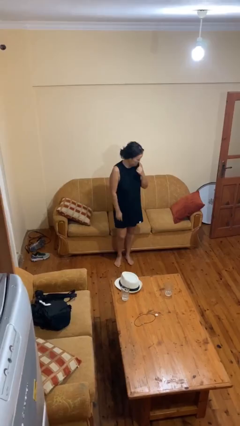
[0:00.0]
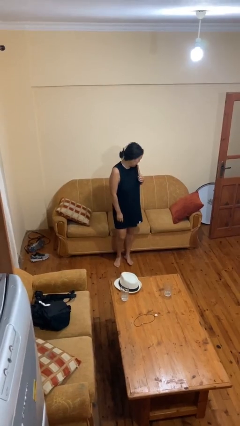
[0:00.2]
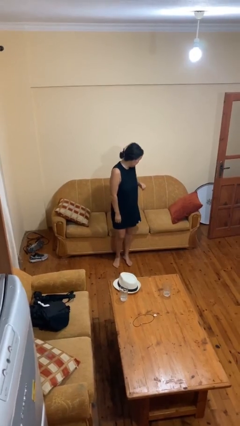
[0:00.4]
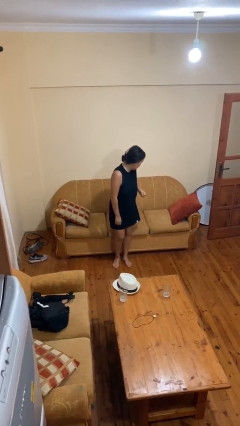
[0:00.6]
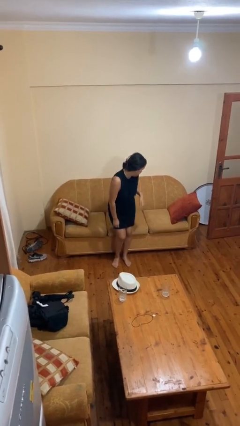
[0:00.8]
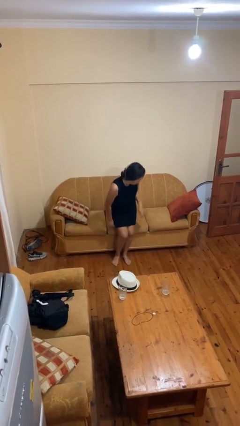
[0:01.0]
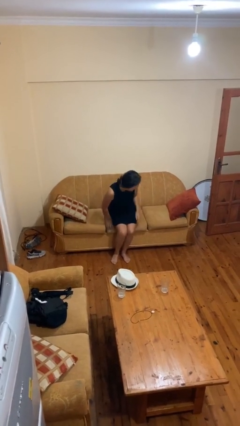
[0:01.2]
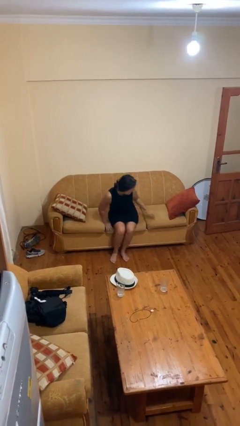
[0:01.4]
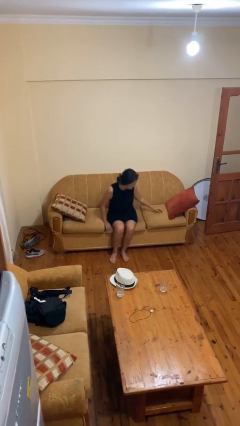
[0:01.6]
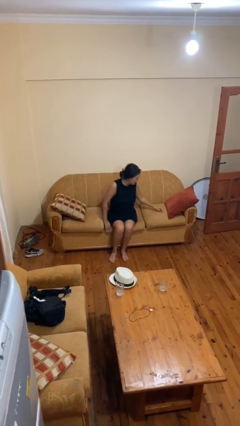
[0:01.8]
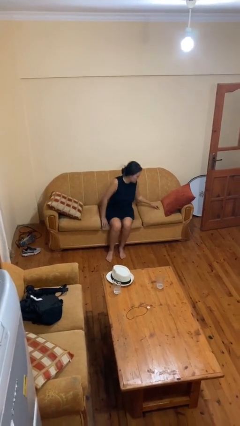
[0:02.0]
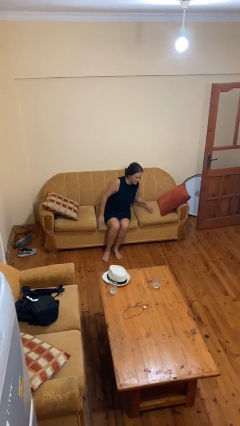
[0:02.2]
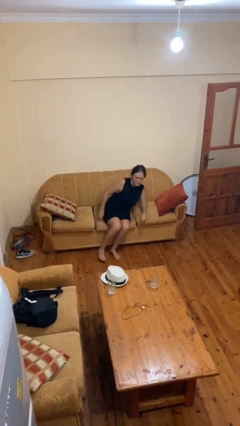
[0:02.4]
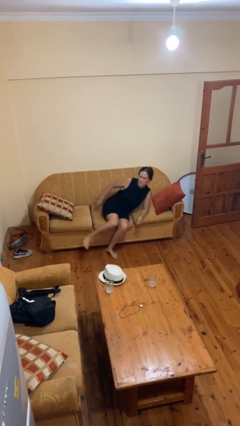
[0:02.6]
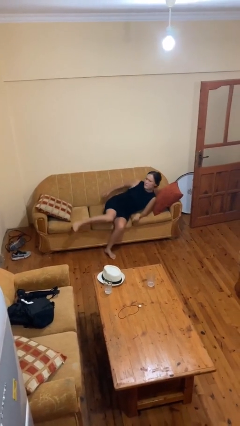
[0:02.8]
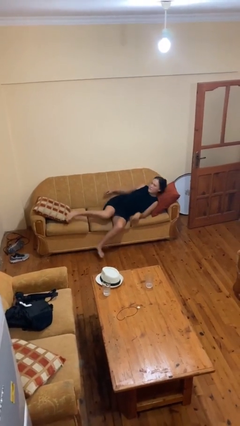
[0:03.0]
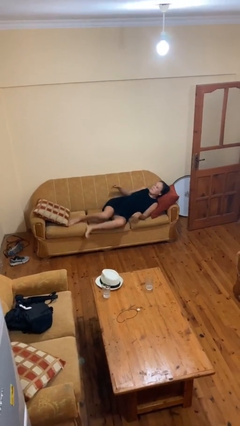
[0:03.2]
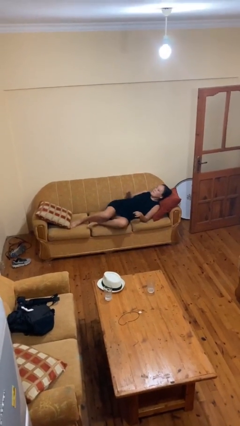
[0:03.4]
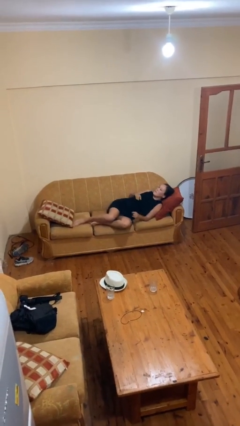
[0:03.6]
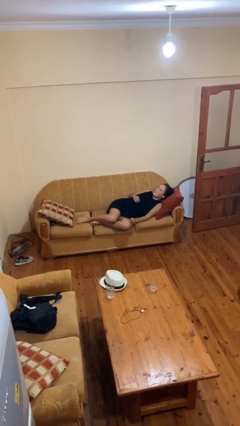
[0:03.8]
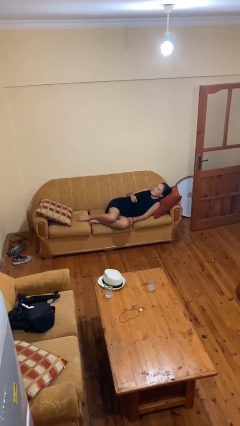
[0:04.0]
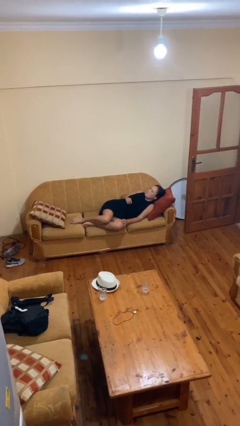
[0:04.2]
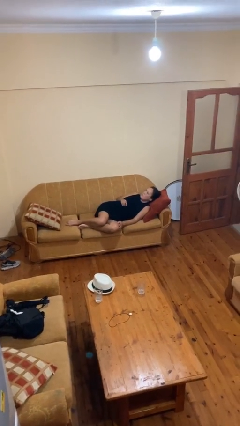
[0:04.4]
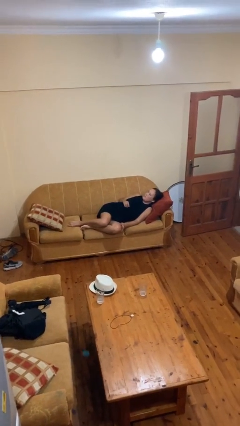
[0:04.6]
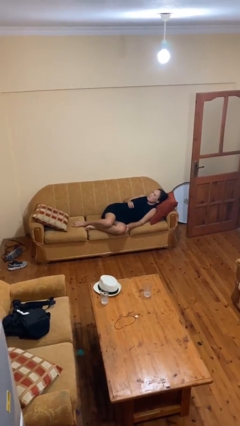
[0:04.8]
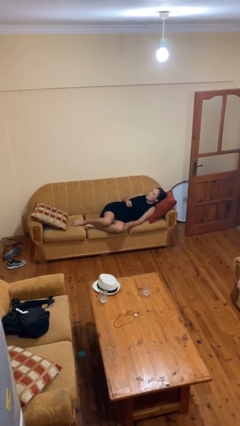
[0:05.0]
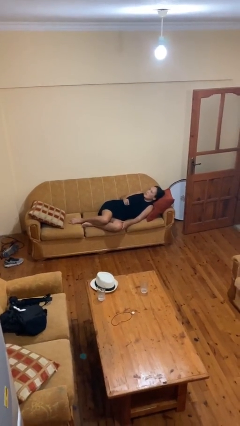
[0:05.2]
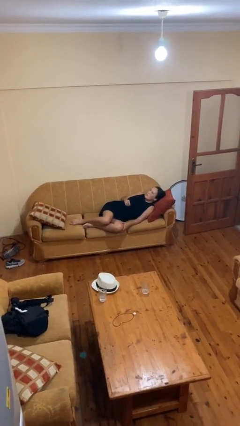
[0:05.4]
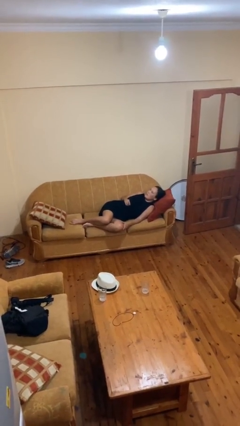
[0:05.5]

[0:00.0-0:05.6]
person lies down on couch

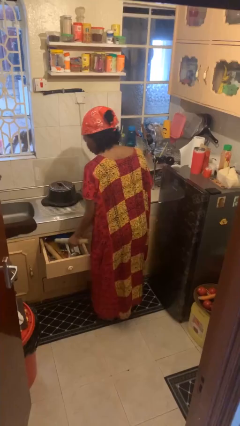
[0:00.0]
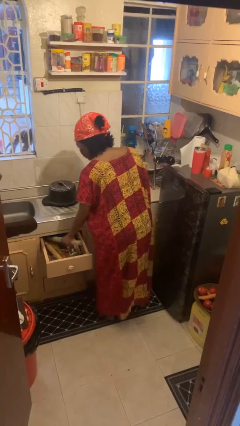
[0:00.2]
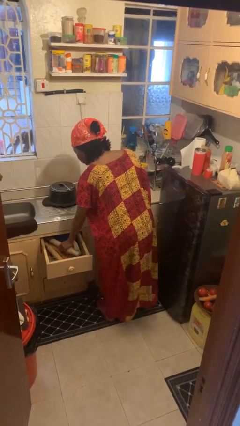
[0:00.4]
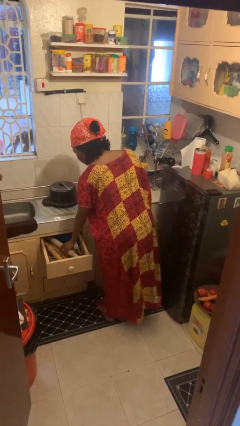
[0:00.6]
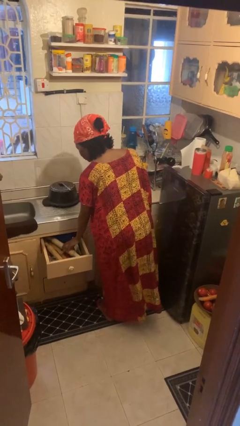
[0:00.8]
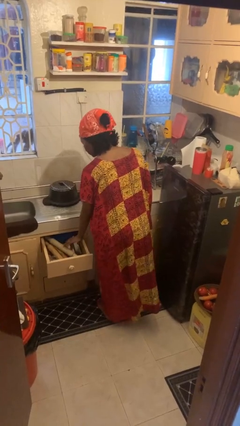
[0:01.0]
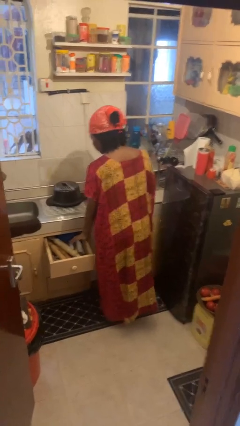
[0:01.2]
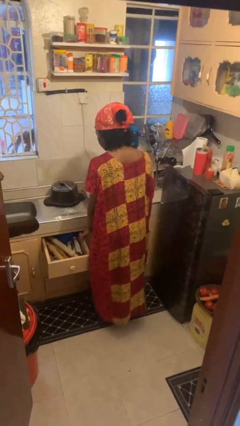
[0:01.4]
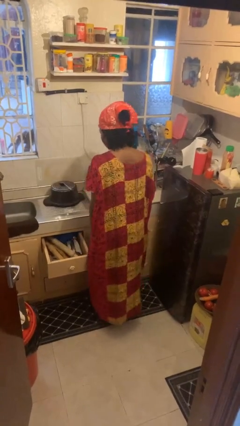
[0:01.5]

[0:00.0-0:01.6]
person puts object into kitchen drawer

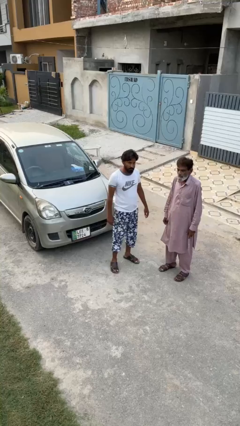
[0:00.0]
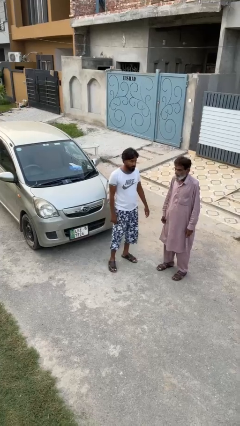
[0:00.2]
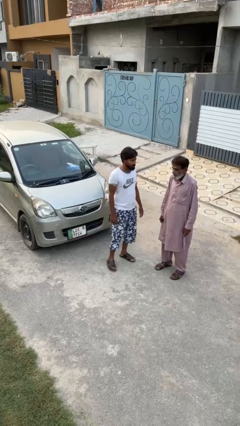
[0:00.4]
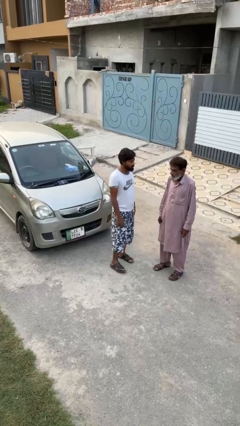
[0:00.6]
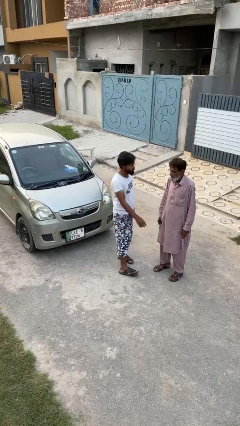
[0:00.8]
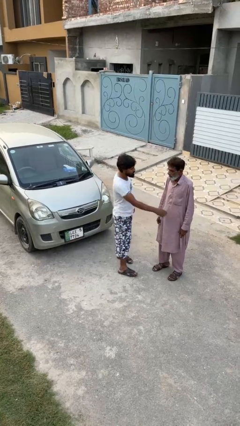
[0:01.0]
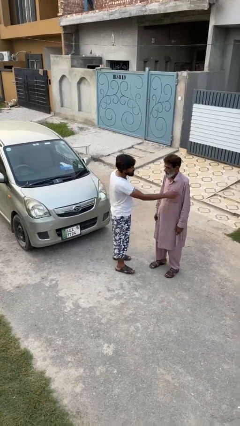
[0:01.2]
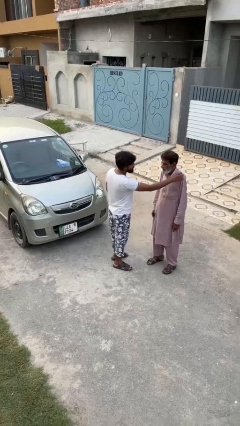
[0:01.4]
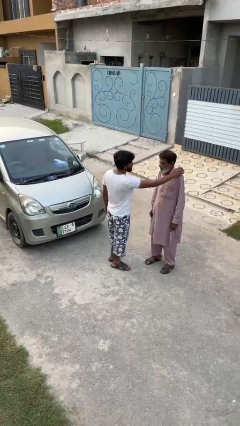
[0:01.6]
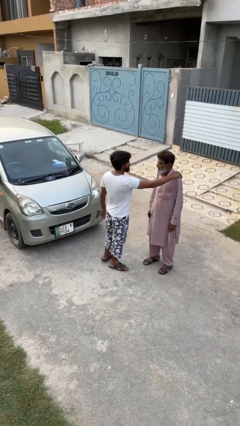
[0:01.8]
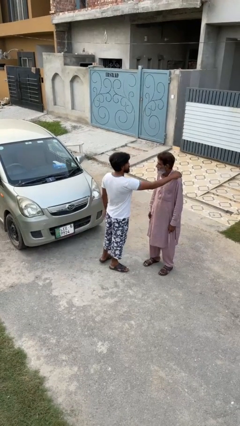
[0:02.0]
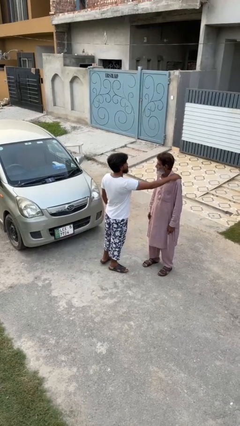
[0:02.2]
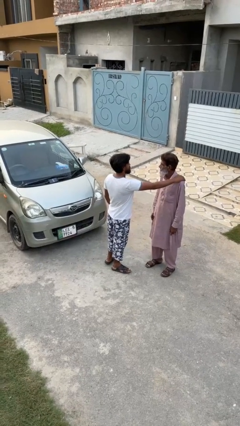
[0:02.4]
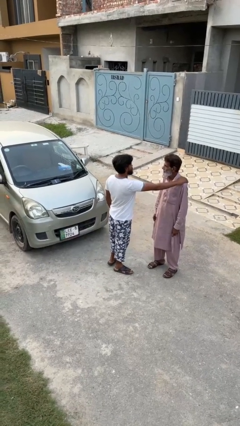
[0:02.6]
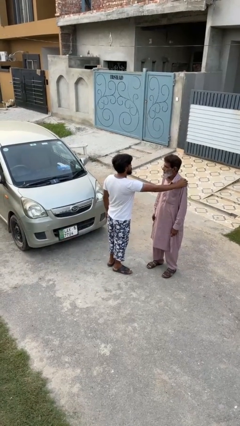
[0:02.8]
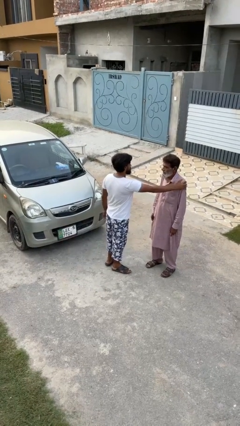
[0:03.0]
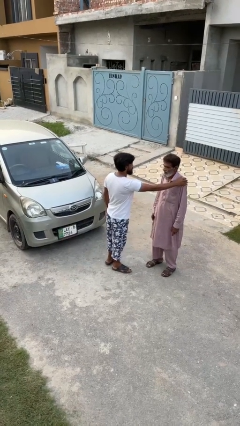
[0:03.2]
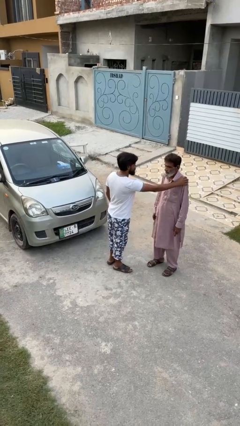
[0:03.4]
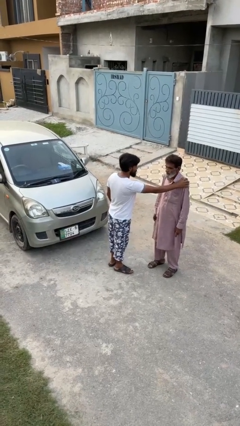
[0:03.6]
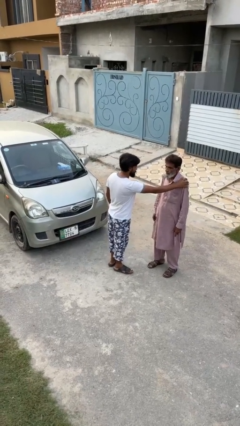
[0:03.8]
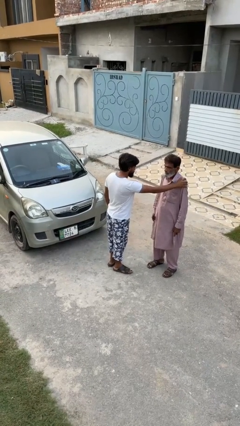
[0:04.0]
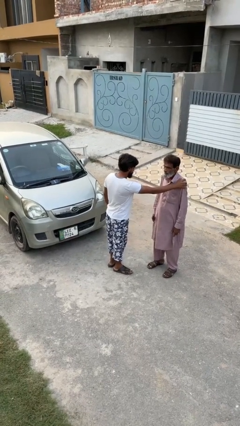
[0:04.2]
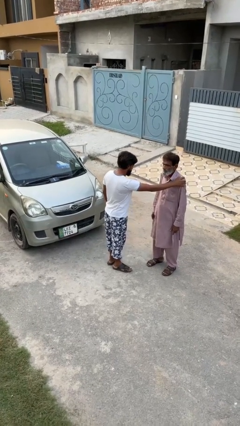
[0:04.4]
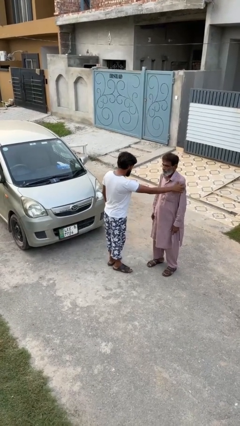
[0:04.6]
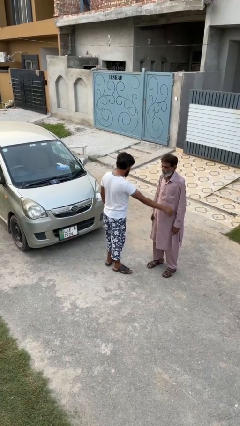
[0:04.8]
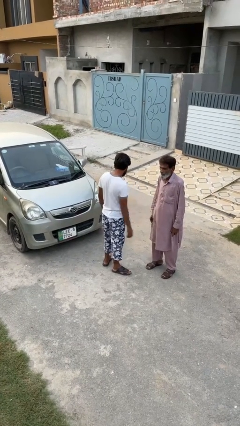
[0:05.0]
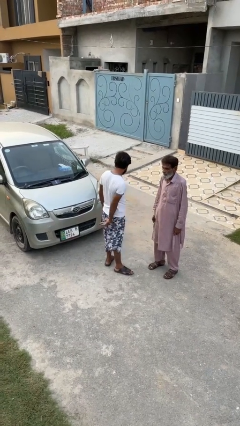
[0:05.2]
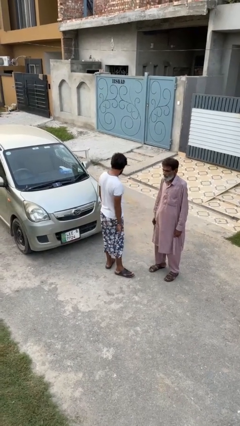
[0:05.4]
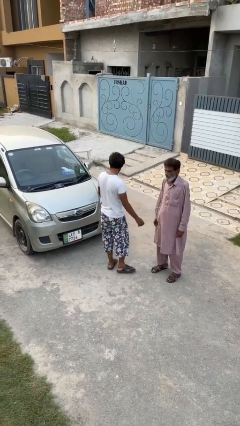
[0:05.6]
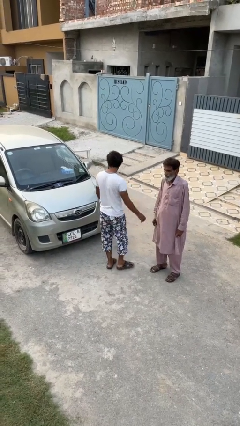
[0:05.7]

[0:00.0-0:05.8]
person pounds shoulders of person

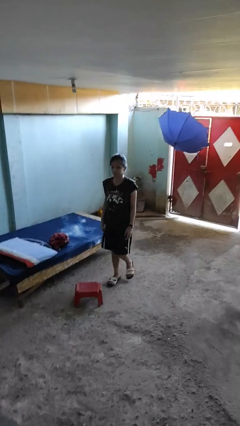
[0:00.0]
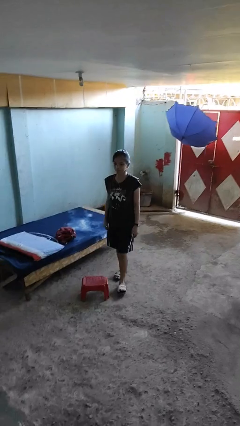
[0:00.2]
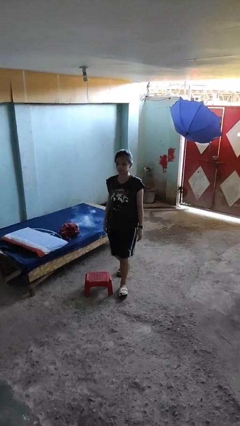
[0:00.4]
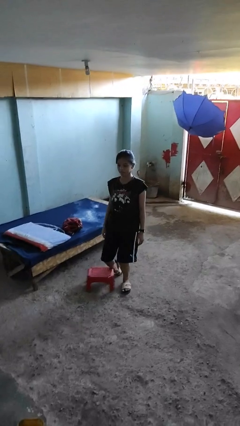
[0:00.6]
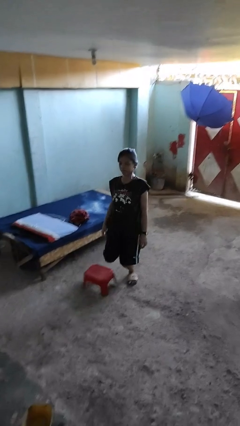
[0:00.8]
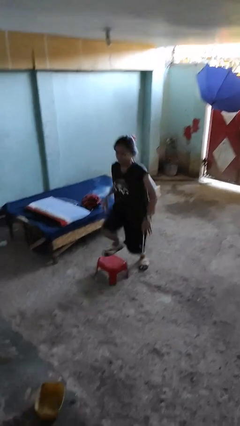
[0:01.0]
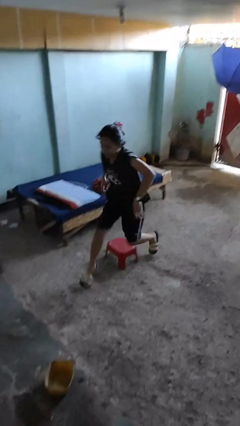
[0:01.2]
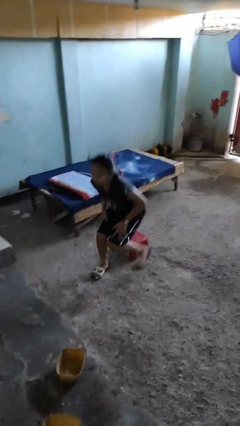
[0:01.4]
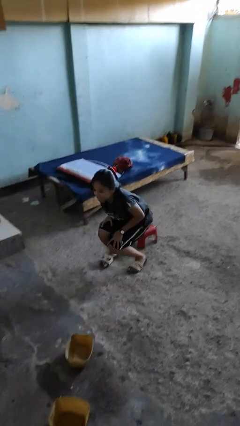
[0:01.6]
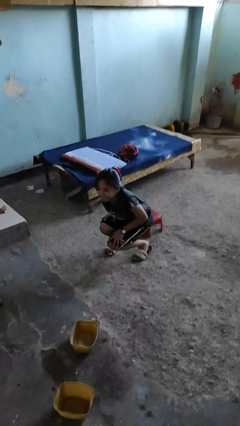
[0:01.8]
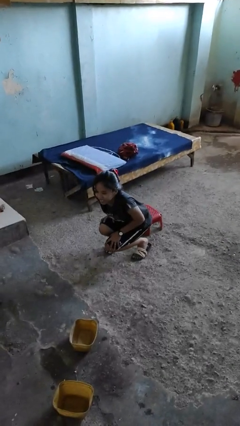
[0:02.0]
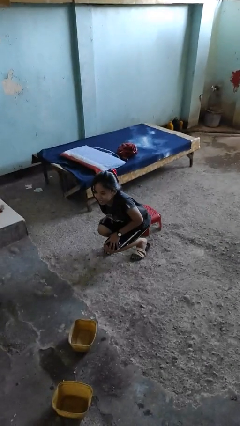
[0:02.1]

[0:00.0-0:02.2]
person trips on object on floor

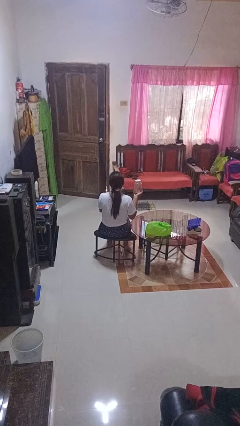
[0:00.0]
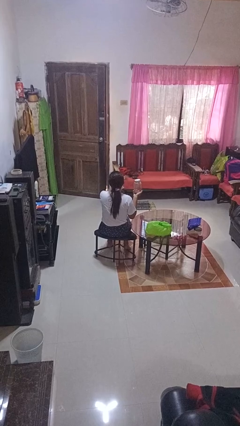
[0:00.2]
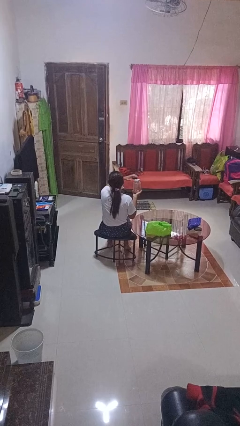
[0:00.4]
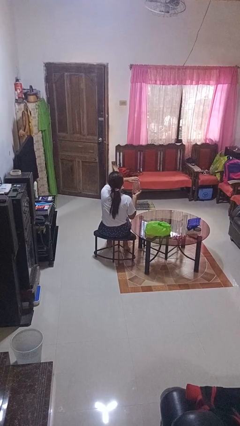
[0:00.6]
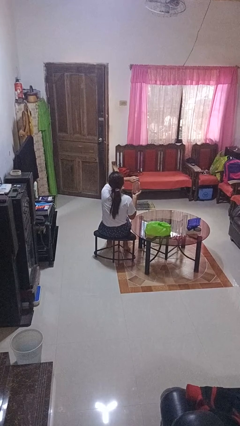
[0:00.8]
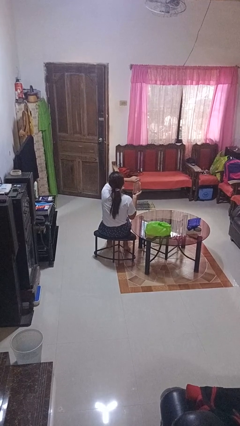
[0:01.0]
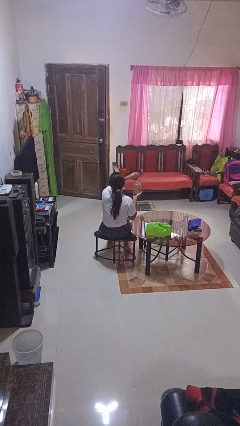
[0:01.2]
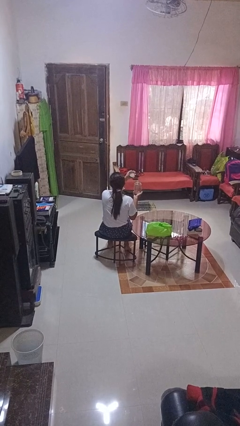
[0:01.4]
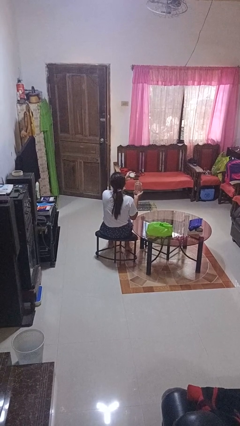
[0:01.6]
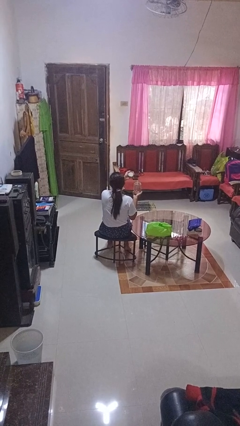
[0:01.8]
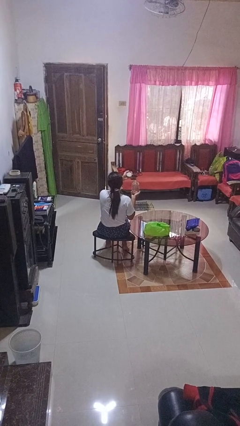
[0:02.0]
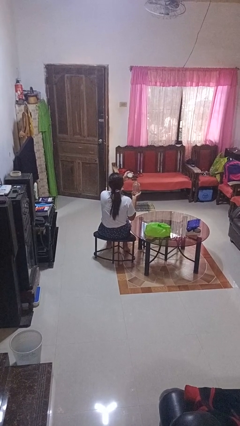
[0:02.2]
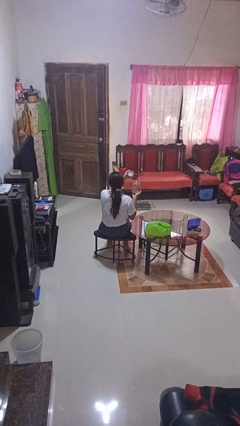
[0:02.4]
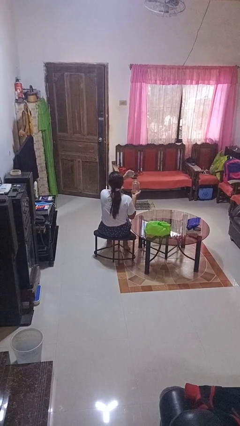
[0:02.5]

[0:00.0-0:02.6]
person opens jar

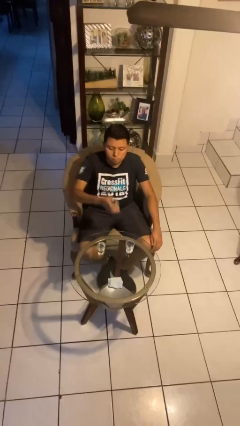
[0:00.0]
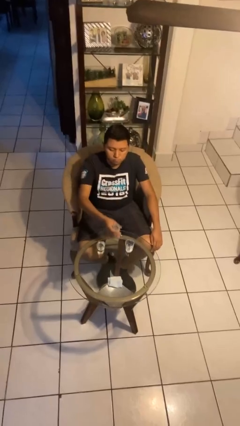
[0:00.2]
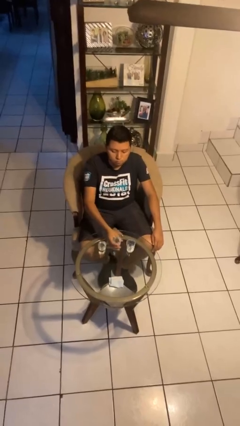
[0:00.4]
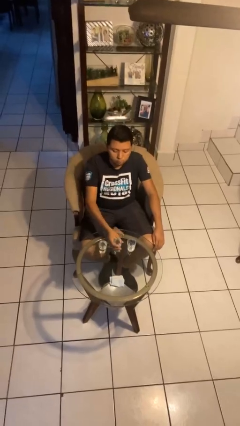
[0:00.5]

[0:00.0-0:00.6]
person puts down object on table
